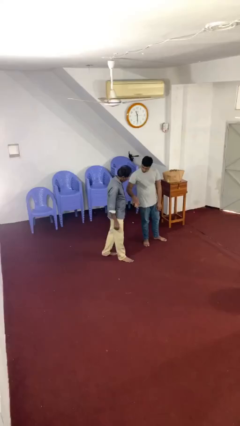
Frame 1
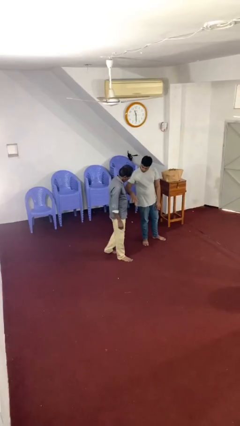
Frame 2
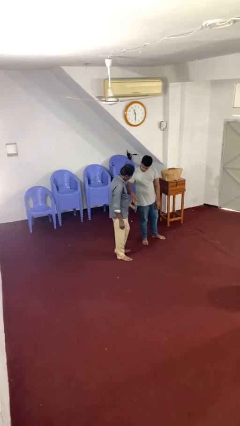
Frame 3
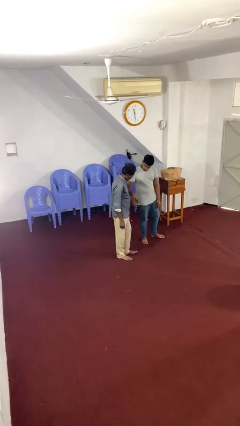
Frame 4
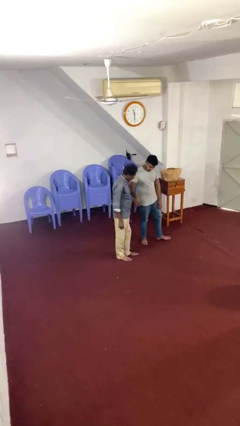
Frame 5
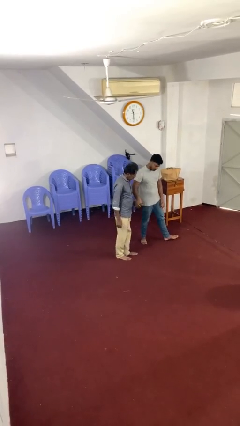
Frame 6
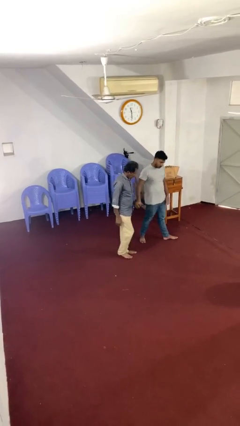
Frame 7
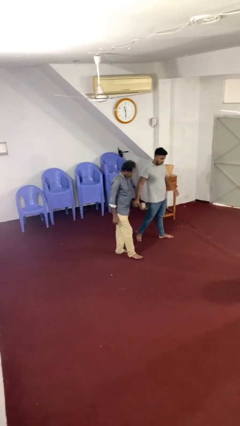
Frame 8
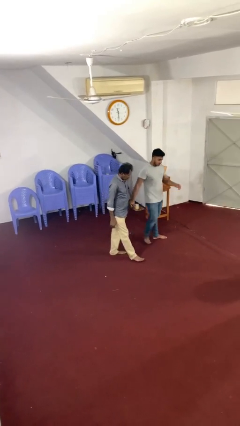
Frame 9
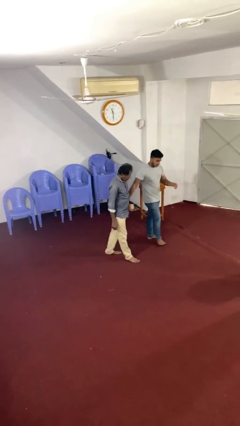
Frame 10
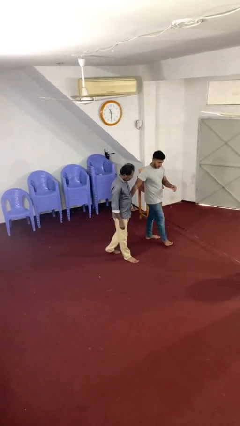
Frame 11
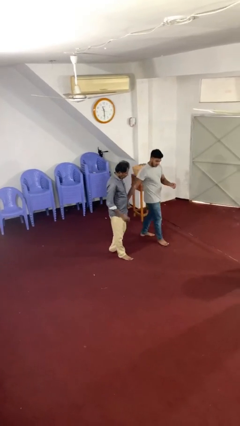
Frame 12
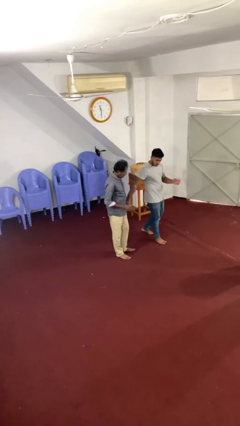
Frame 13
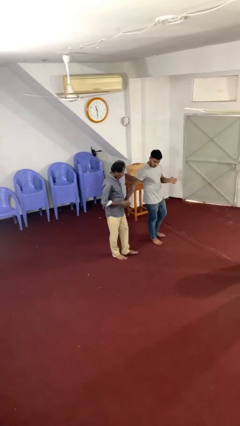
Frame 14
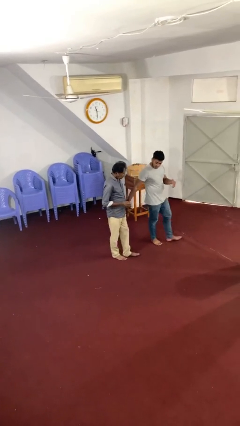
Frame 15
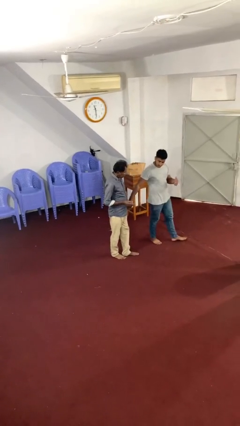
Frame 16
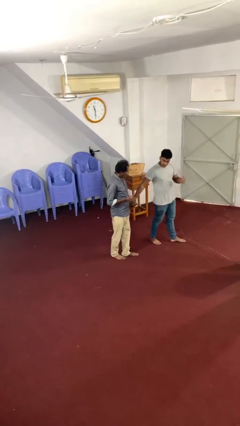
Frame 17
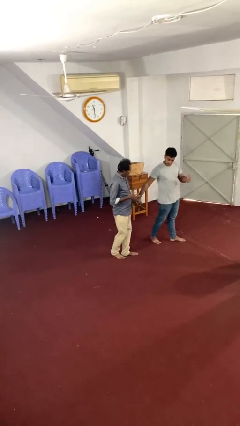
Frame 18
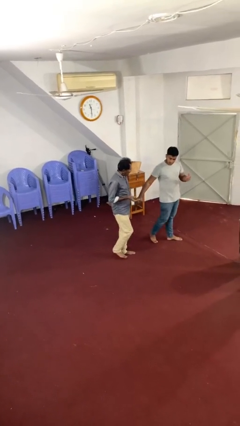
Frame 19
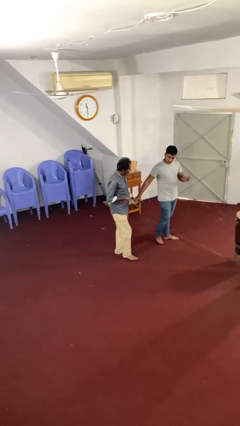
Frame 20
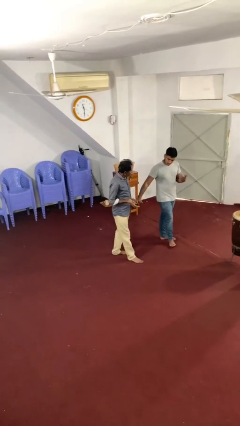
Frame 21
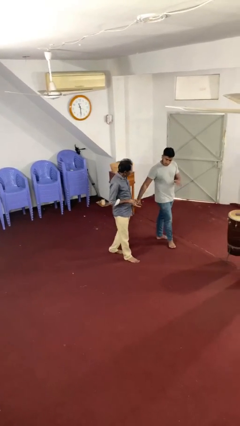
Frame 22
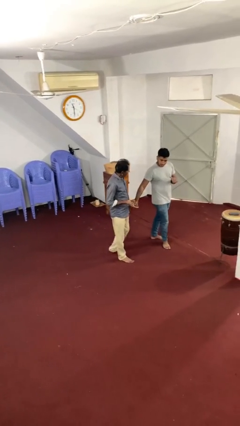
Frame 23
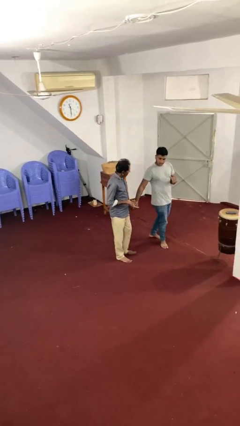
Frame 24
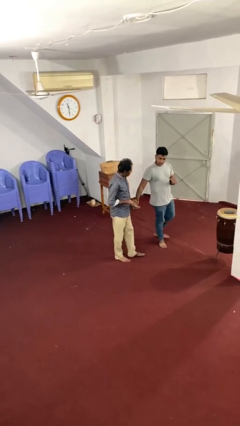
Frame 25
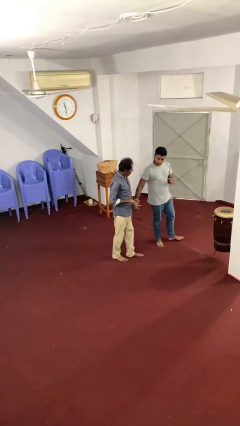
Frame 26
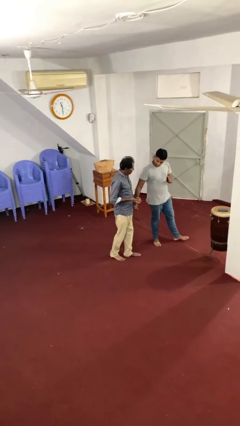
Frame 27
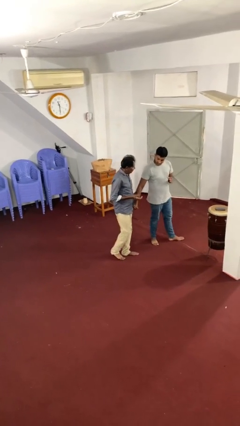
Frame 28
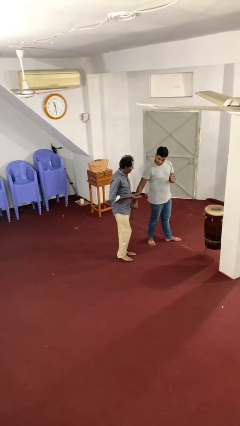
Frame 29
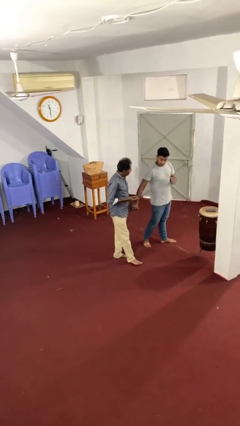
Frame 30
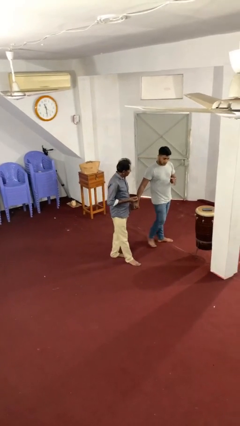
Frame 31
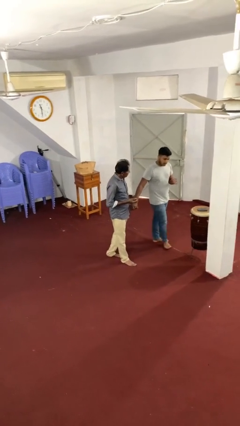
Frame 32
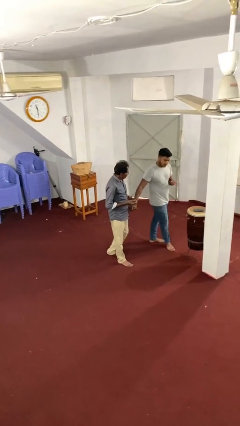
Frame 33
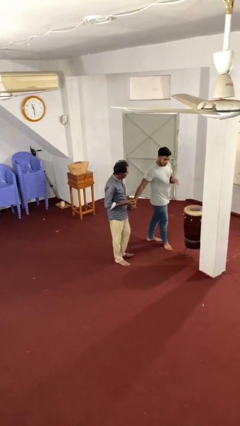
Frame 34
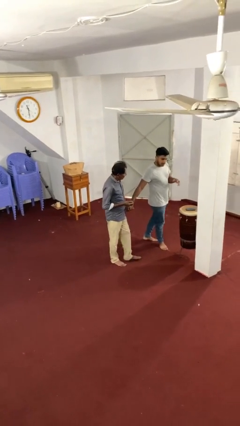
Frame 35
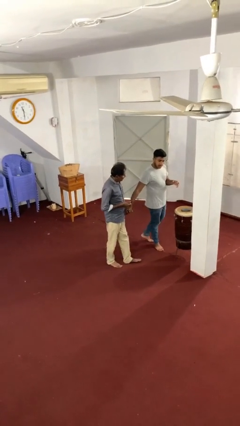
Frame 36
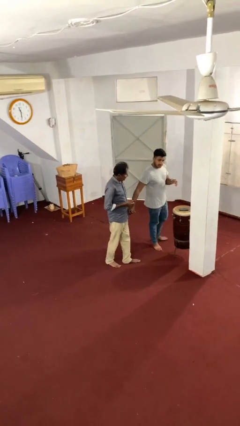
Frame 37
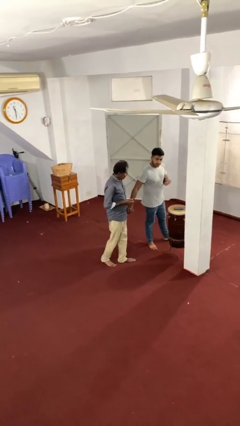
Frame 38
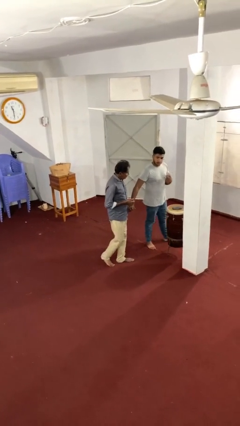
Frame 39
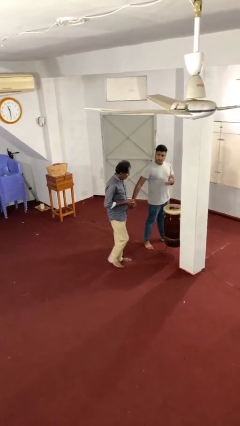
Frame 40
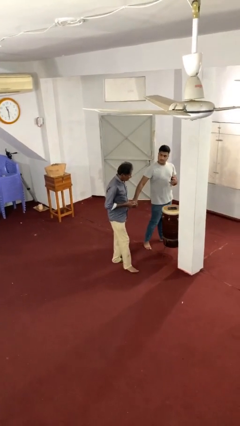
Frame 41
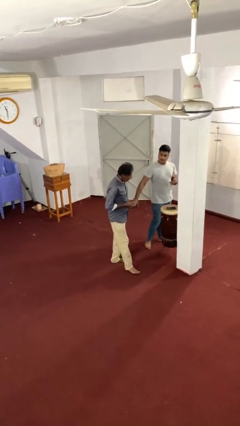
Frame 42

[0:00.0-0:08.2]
person holds hand

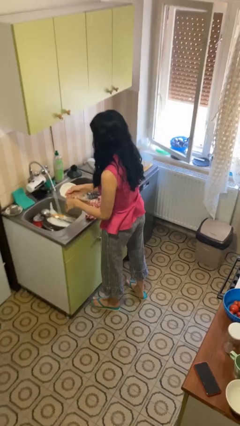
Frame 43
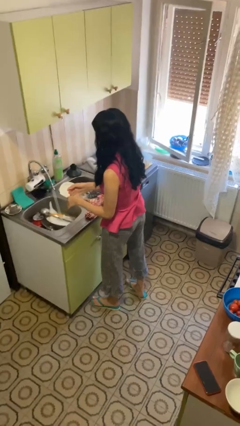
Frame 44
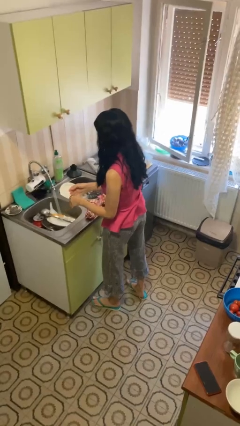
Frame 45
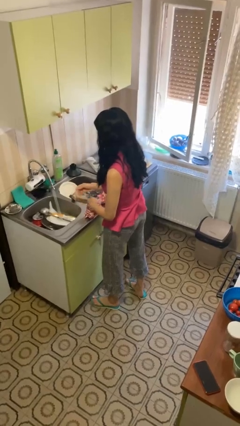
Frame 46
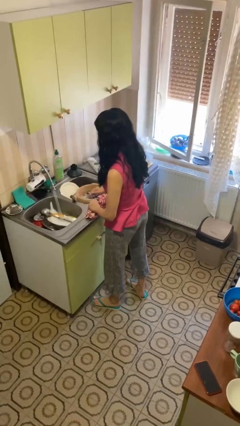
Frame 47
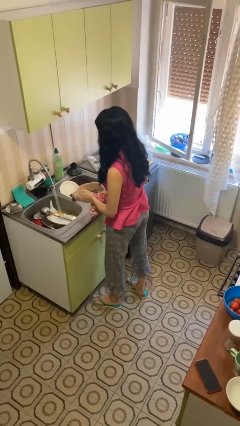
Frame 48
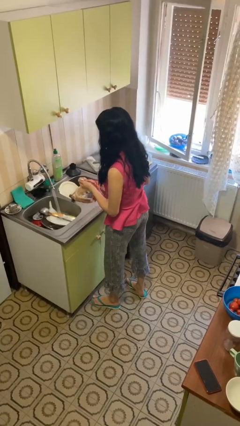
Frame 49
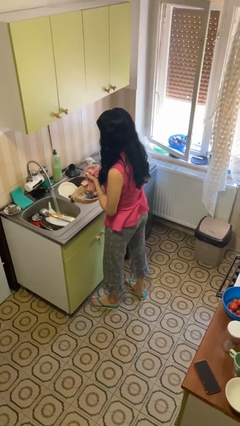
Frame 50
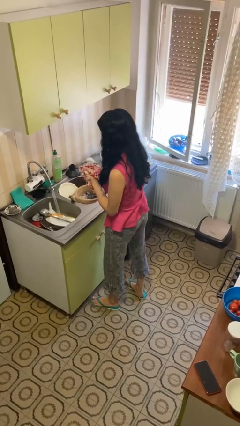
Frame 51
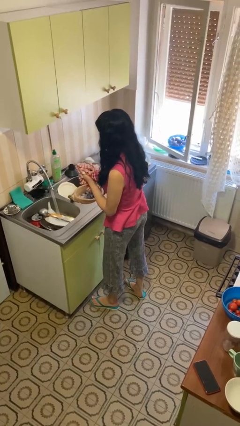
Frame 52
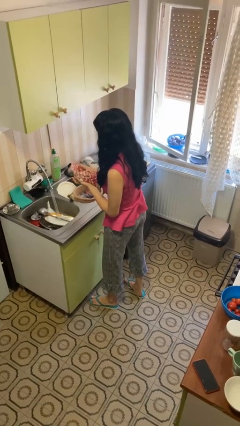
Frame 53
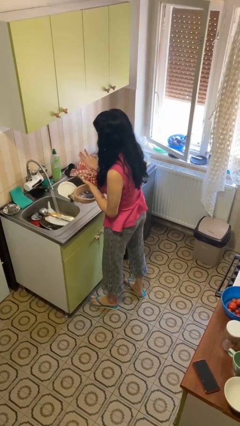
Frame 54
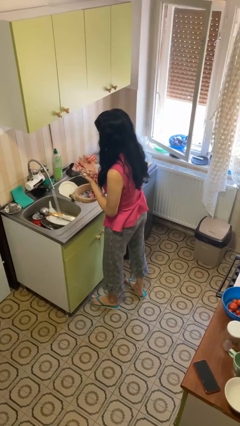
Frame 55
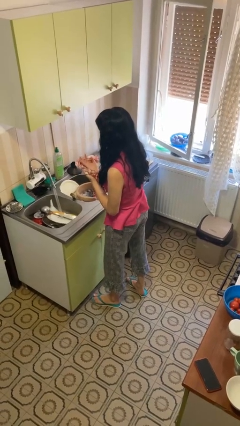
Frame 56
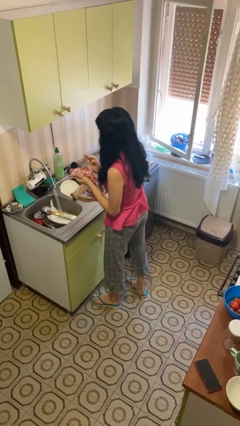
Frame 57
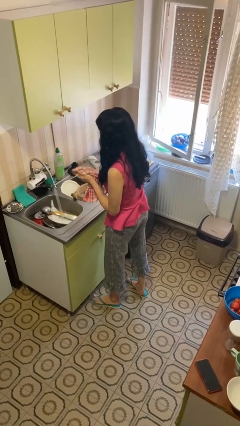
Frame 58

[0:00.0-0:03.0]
person dries hands with towel

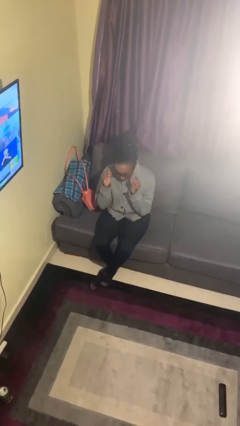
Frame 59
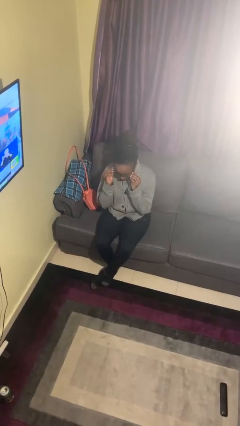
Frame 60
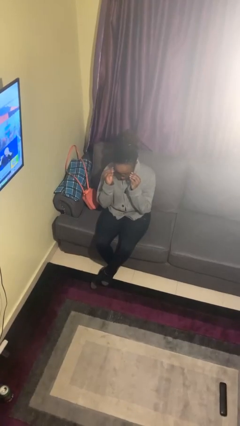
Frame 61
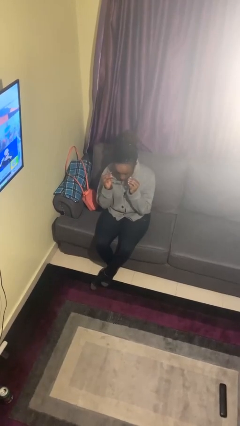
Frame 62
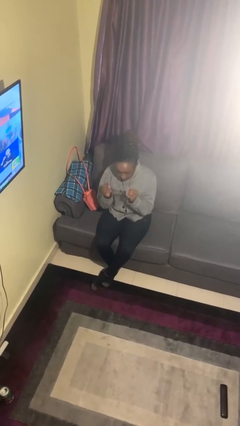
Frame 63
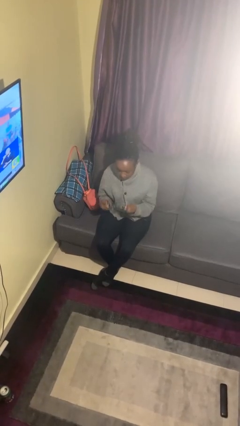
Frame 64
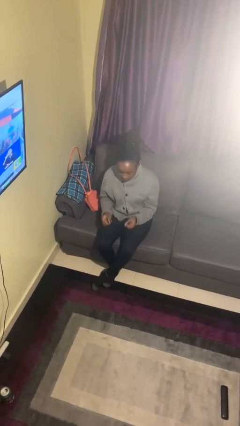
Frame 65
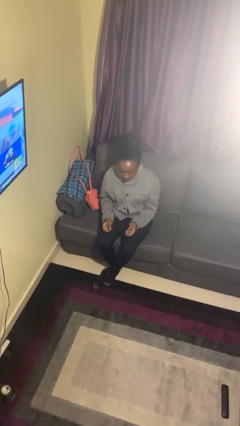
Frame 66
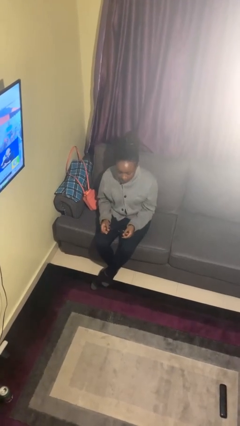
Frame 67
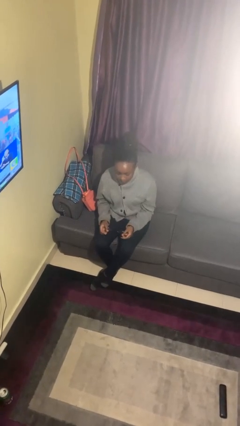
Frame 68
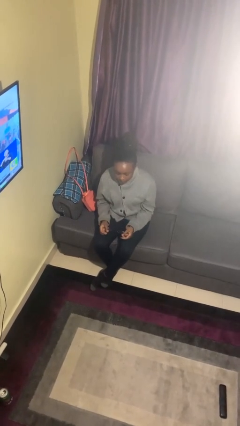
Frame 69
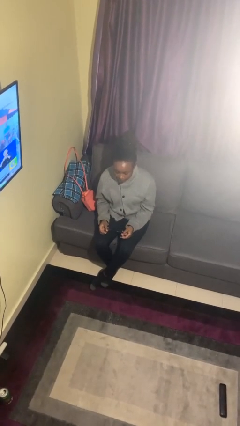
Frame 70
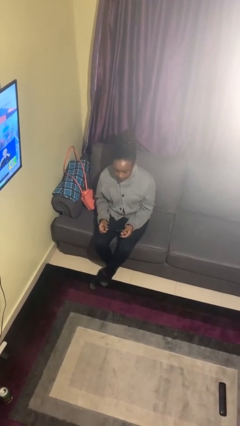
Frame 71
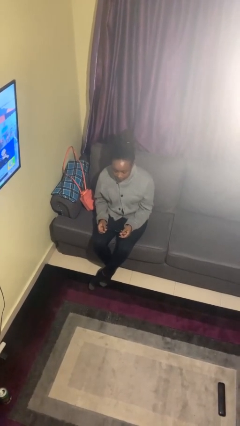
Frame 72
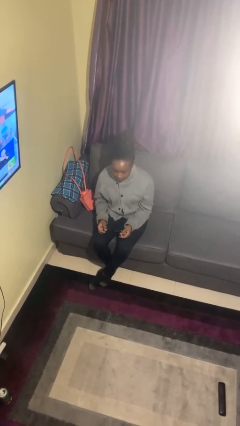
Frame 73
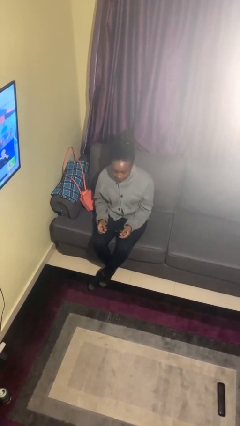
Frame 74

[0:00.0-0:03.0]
person takes off glasses

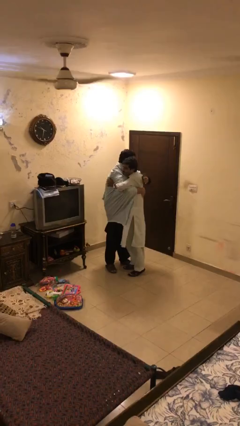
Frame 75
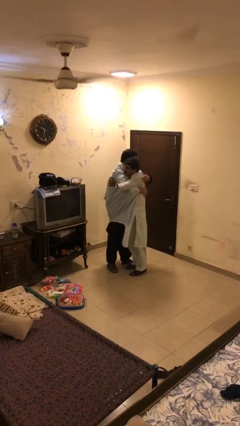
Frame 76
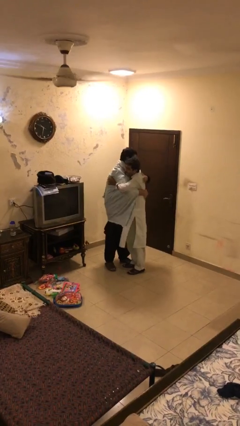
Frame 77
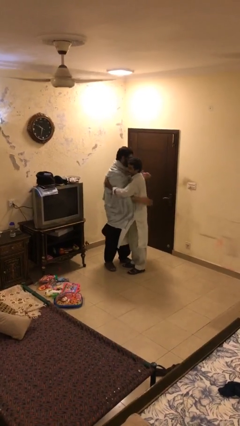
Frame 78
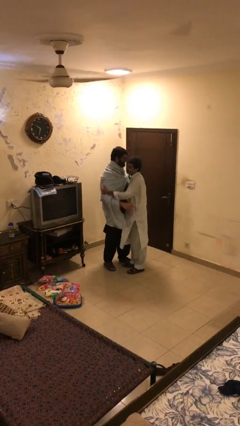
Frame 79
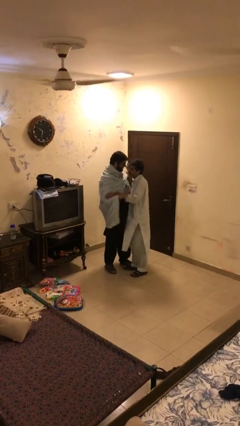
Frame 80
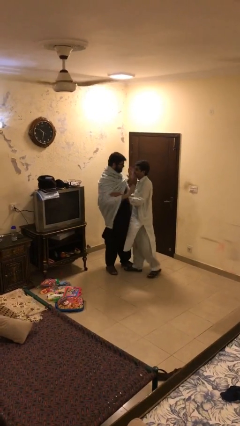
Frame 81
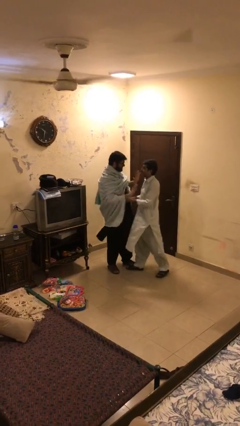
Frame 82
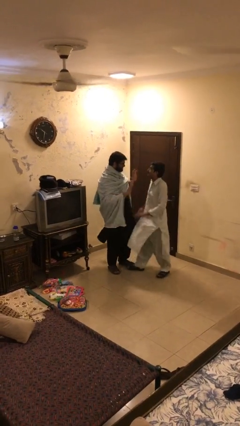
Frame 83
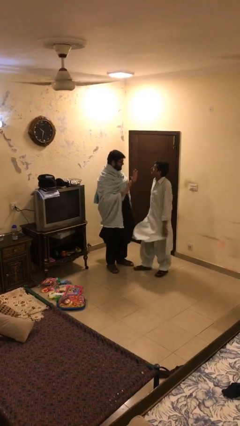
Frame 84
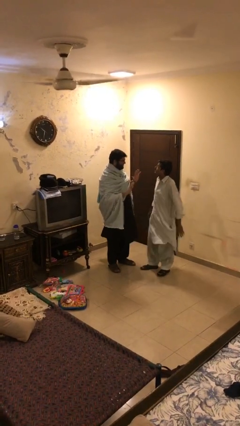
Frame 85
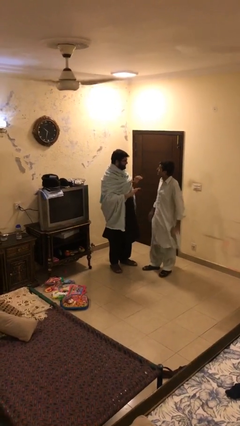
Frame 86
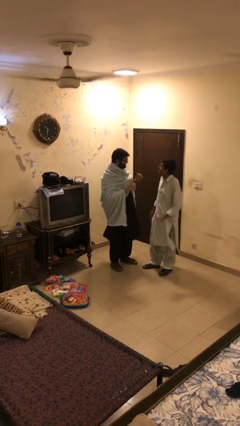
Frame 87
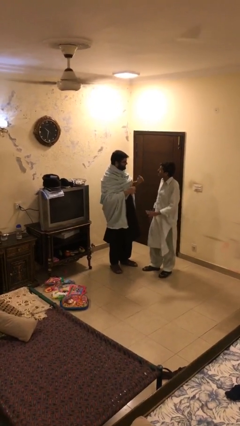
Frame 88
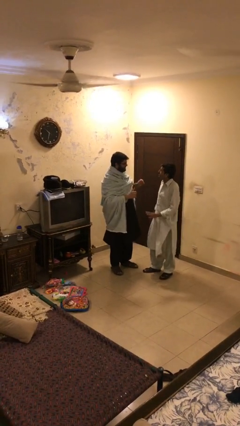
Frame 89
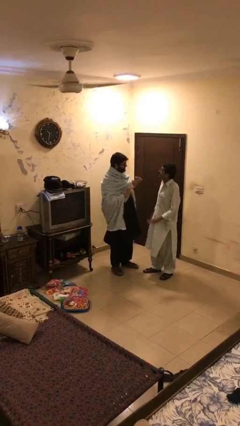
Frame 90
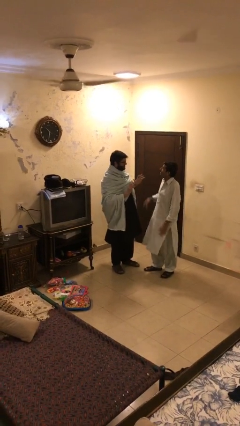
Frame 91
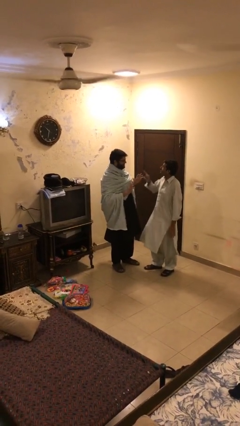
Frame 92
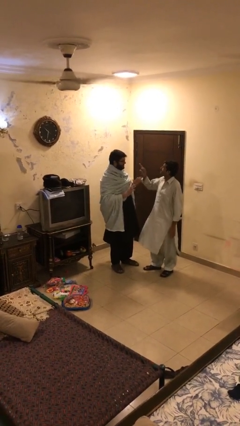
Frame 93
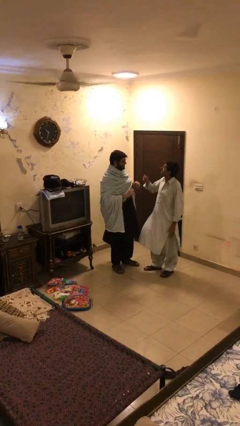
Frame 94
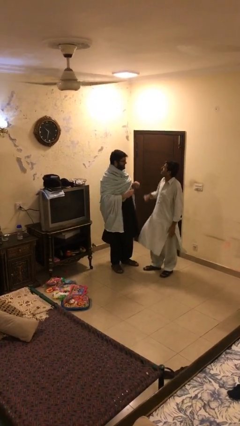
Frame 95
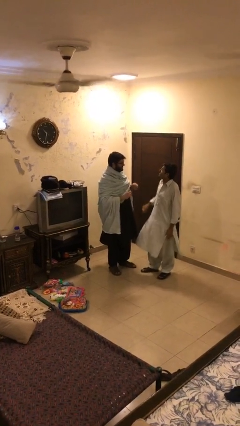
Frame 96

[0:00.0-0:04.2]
person talks to person
